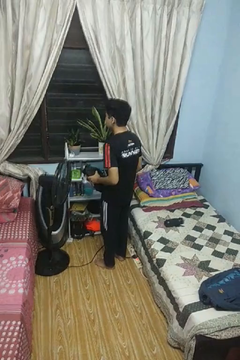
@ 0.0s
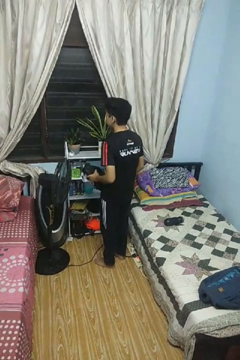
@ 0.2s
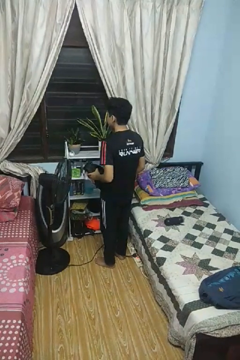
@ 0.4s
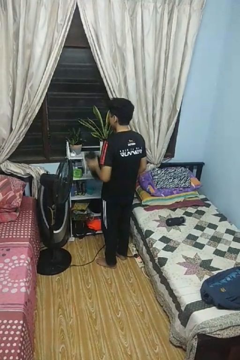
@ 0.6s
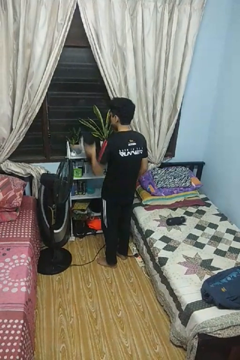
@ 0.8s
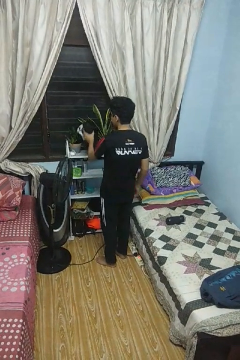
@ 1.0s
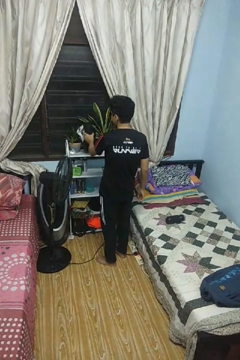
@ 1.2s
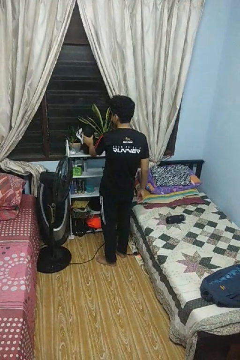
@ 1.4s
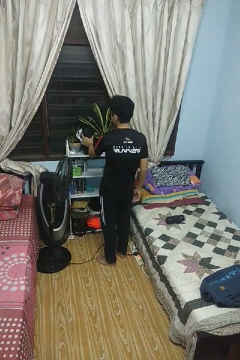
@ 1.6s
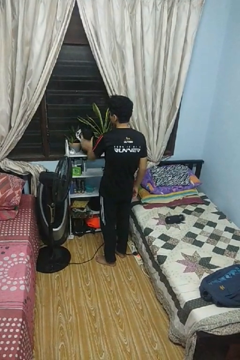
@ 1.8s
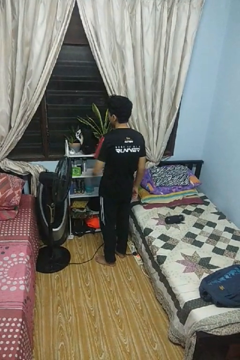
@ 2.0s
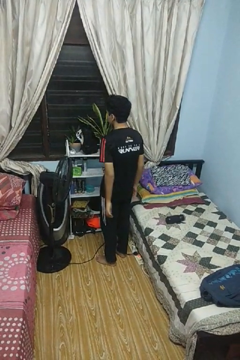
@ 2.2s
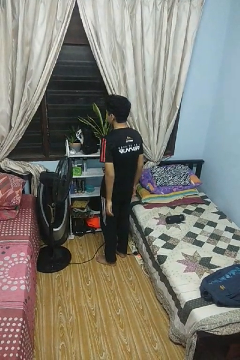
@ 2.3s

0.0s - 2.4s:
person puts down object on countertop

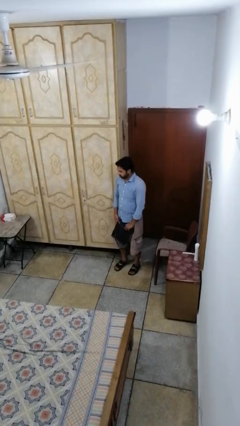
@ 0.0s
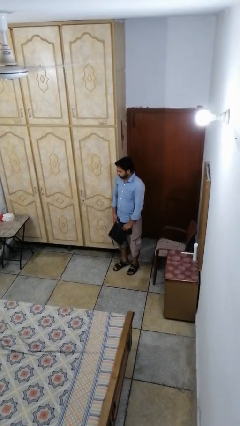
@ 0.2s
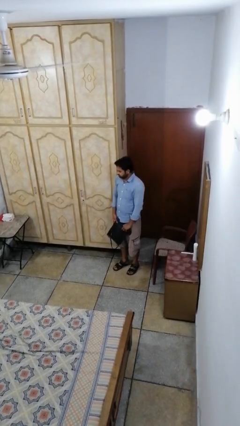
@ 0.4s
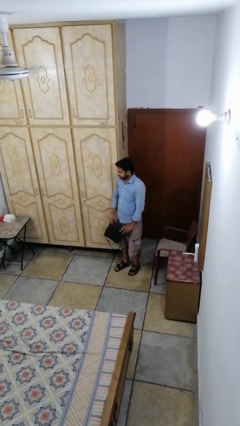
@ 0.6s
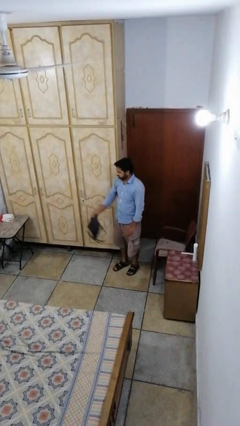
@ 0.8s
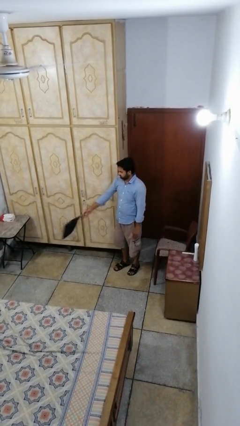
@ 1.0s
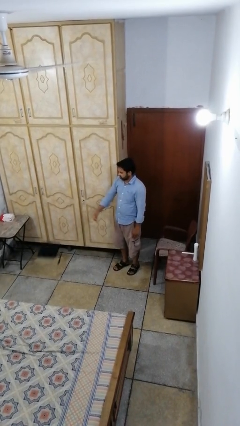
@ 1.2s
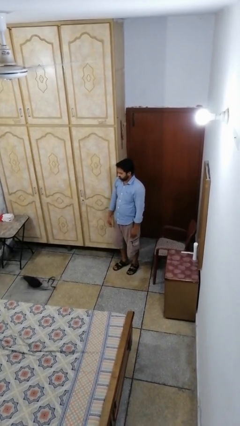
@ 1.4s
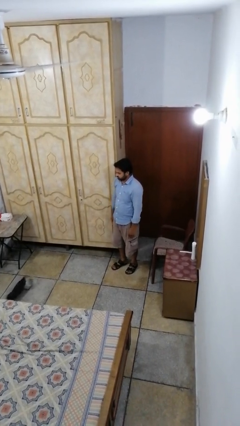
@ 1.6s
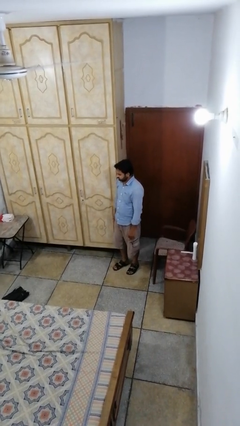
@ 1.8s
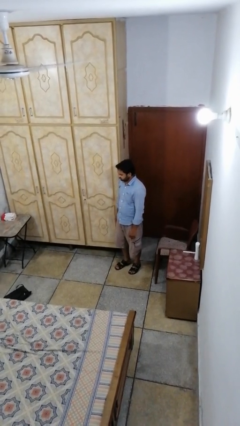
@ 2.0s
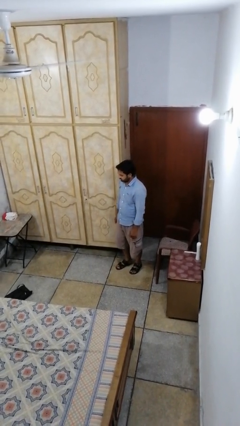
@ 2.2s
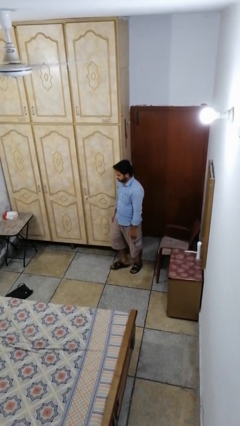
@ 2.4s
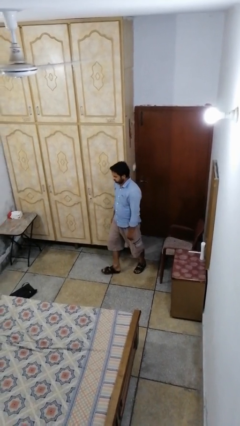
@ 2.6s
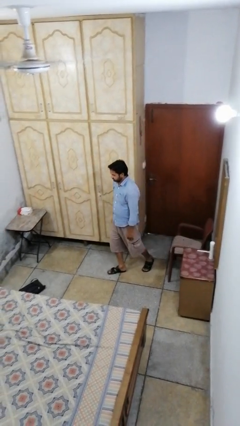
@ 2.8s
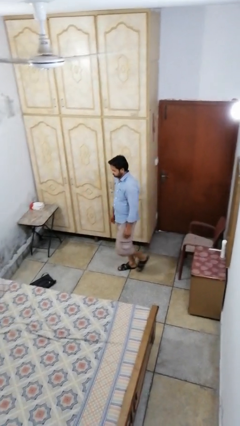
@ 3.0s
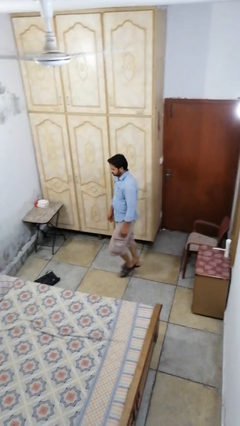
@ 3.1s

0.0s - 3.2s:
person throws object to ground

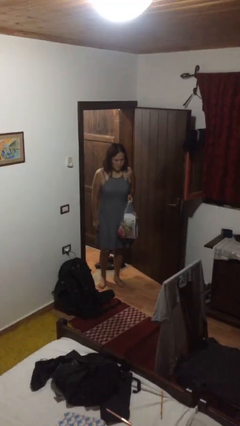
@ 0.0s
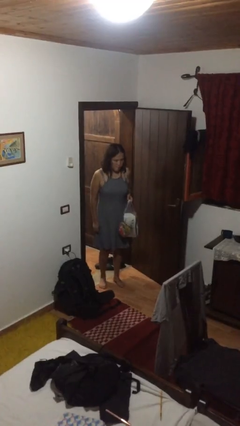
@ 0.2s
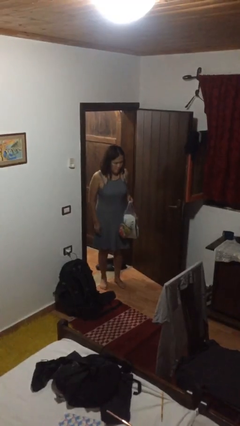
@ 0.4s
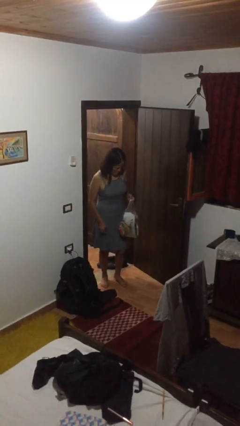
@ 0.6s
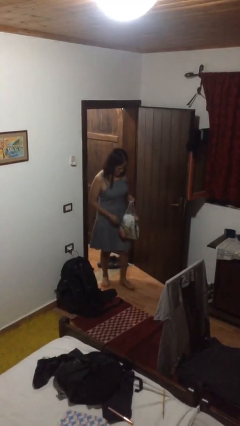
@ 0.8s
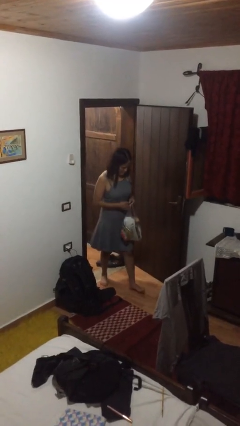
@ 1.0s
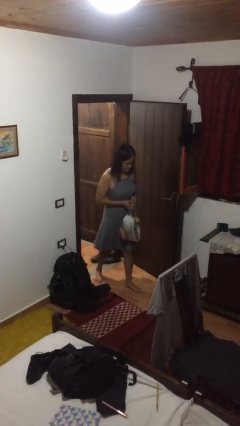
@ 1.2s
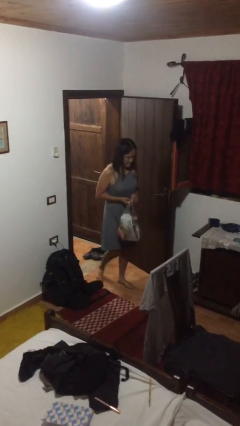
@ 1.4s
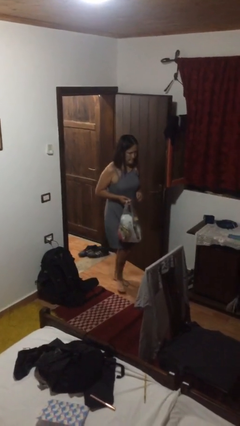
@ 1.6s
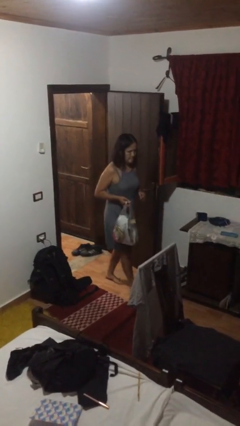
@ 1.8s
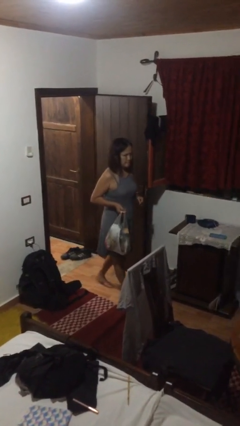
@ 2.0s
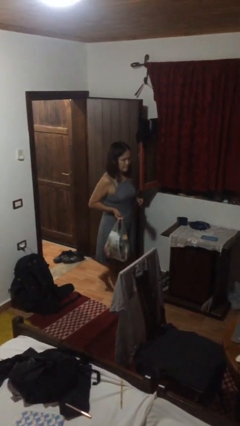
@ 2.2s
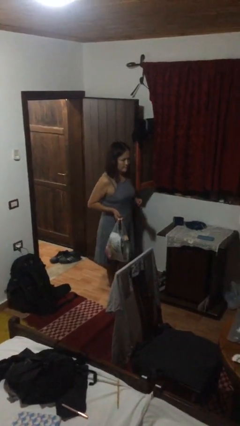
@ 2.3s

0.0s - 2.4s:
person carries groceries

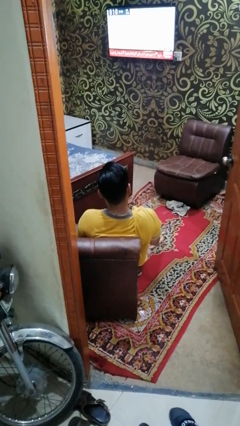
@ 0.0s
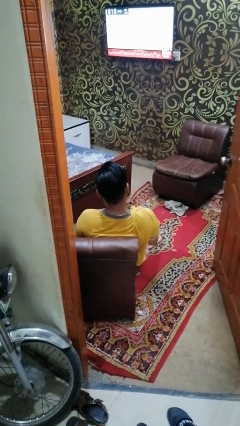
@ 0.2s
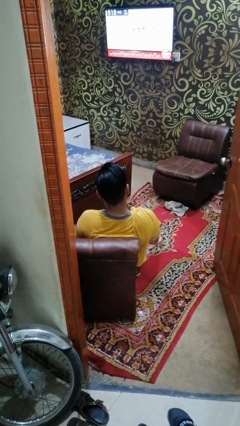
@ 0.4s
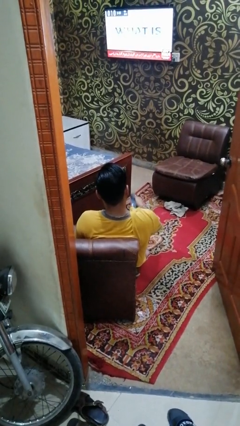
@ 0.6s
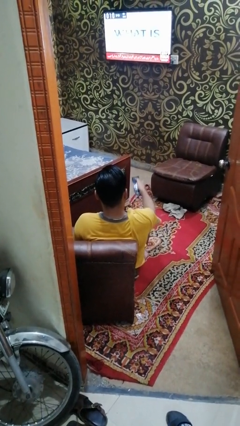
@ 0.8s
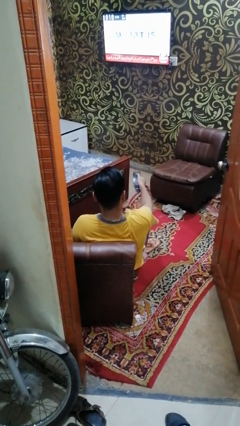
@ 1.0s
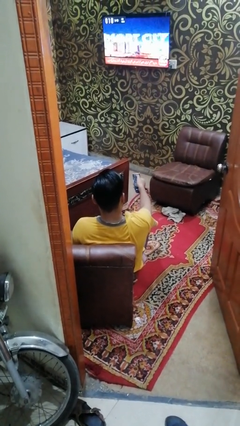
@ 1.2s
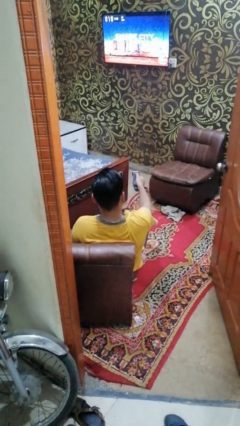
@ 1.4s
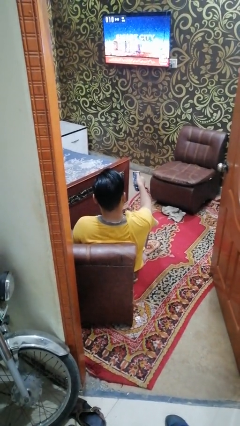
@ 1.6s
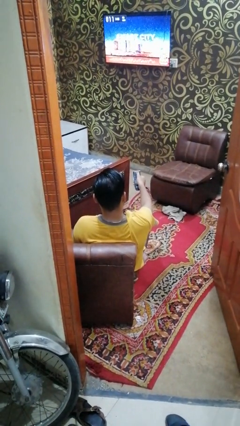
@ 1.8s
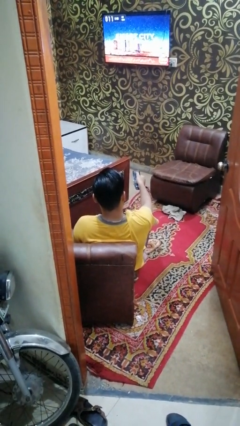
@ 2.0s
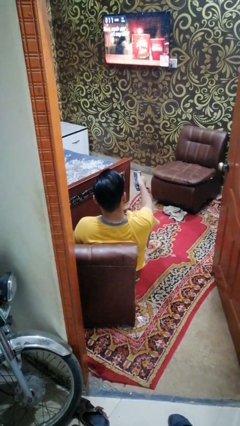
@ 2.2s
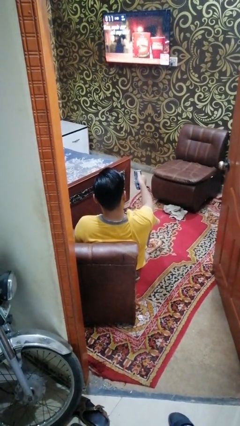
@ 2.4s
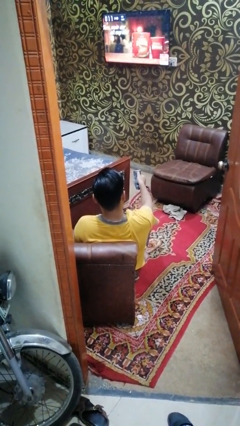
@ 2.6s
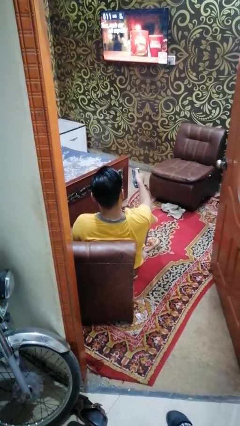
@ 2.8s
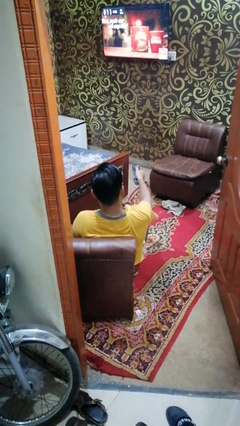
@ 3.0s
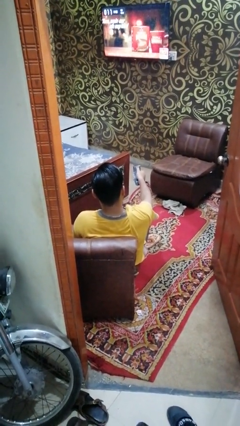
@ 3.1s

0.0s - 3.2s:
person uses television remote

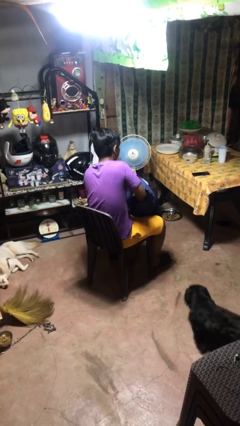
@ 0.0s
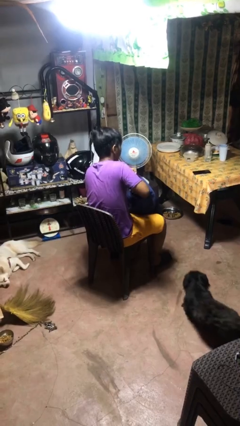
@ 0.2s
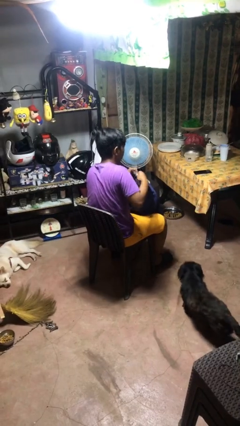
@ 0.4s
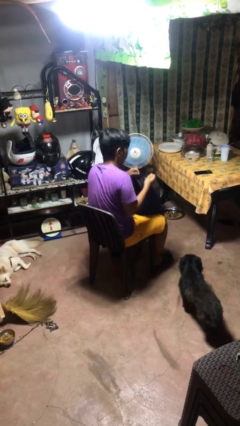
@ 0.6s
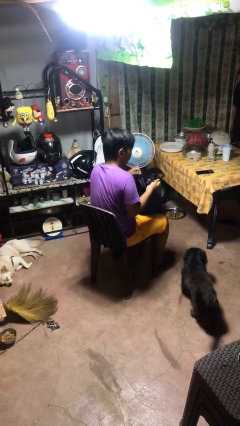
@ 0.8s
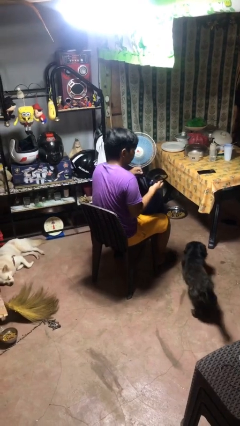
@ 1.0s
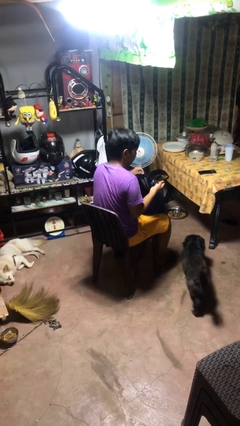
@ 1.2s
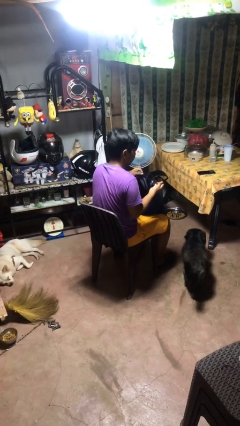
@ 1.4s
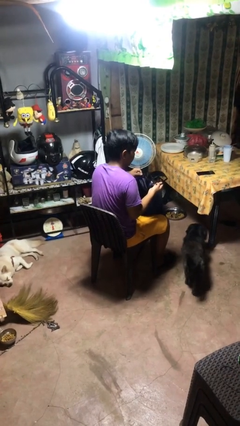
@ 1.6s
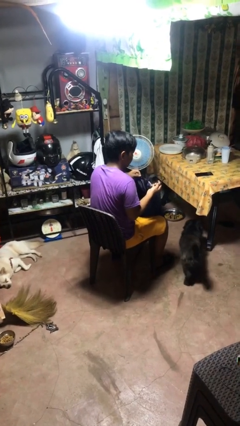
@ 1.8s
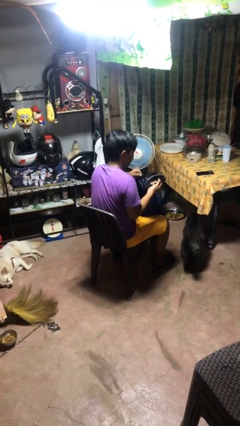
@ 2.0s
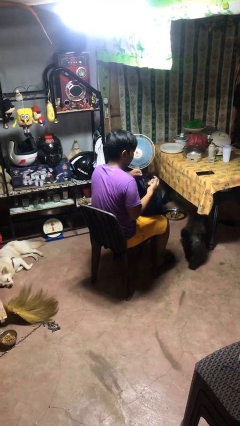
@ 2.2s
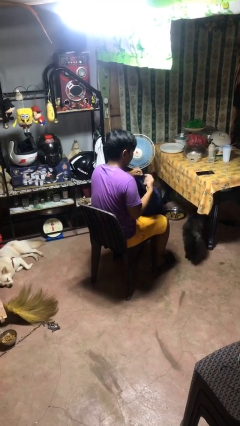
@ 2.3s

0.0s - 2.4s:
person takes object from backpack

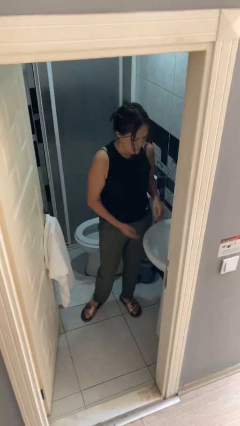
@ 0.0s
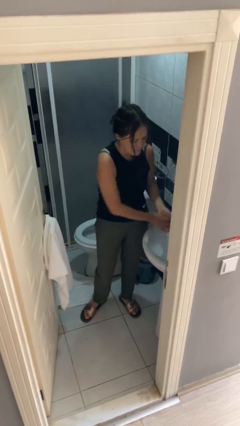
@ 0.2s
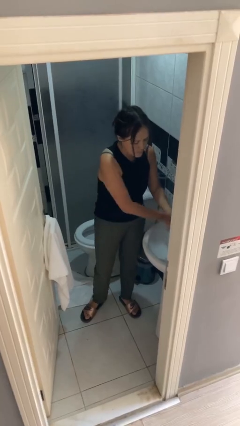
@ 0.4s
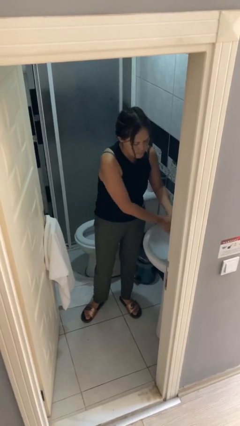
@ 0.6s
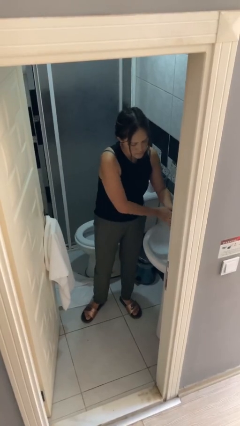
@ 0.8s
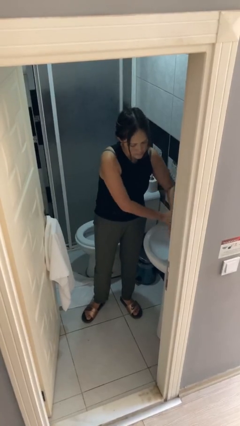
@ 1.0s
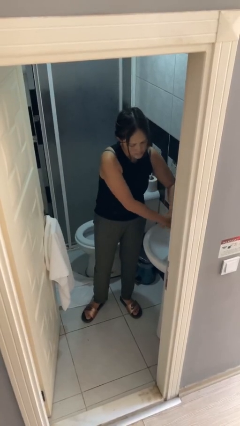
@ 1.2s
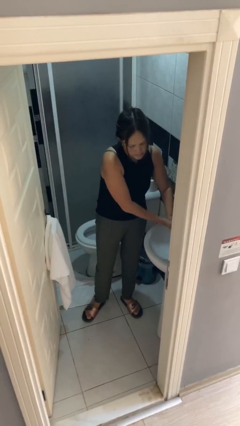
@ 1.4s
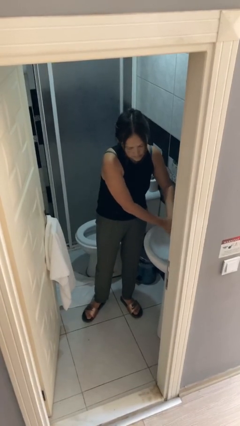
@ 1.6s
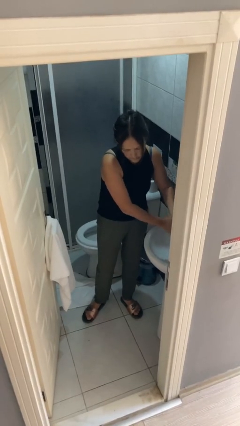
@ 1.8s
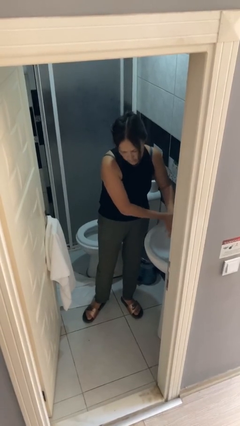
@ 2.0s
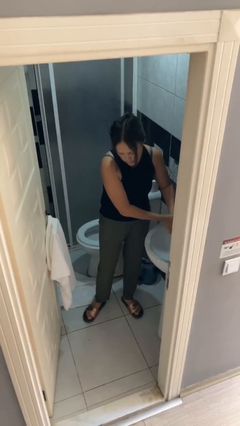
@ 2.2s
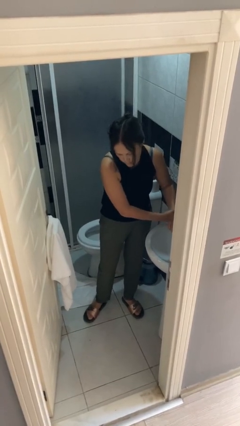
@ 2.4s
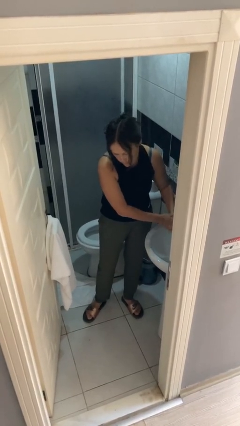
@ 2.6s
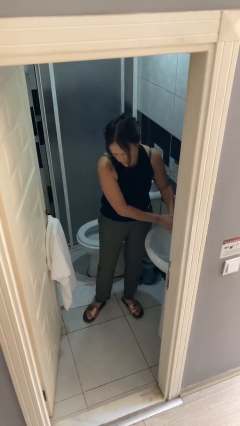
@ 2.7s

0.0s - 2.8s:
person washes hands

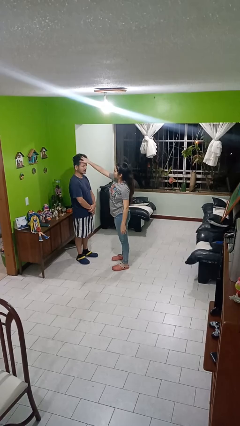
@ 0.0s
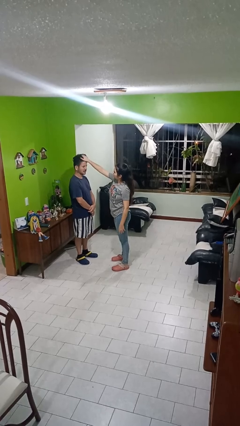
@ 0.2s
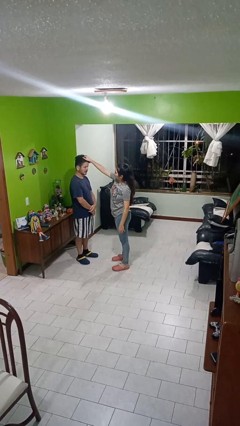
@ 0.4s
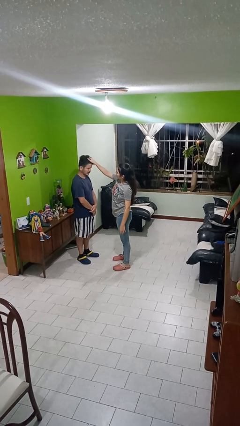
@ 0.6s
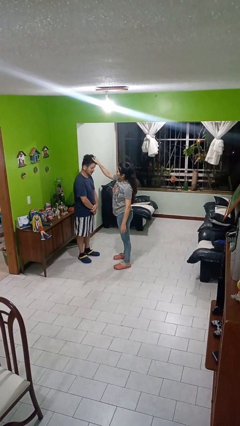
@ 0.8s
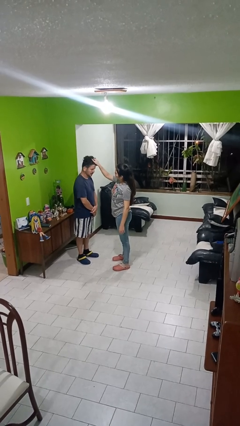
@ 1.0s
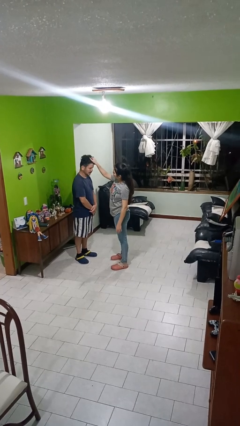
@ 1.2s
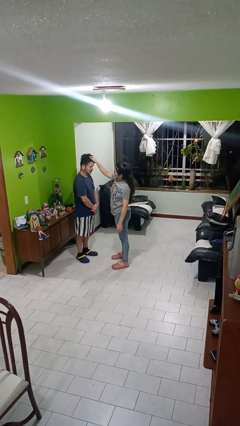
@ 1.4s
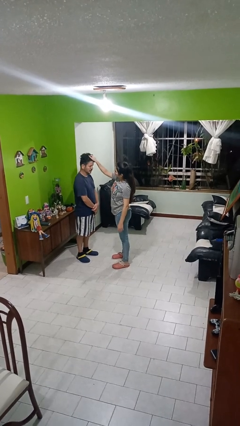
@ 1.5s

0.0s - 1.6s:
person grabs person by hair

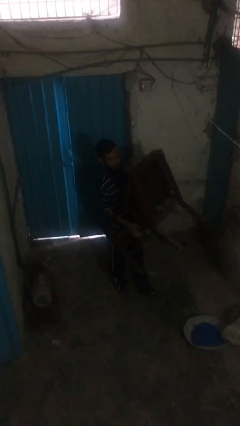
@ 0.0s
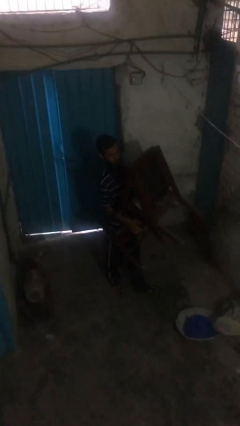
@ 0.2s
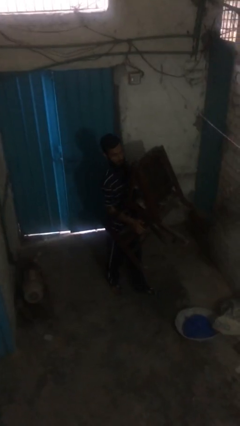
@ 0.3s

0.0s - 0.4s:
person puts down object on floor
